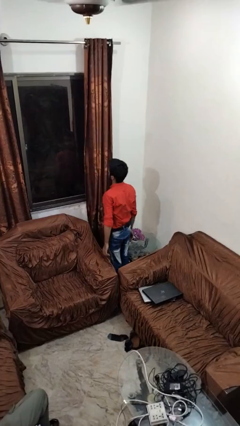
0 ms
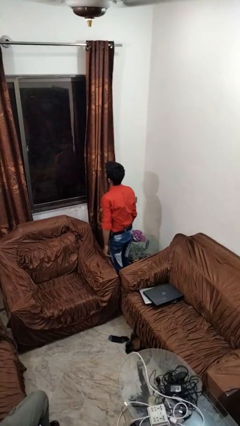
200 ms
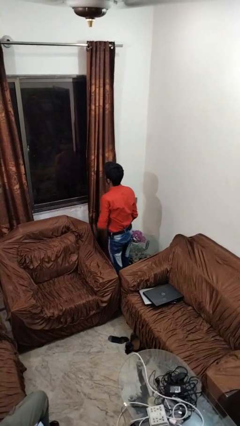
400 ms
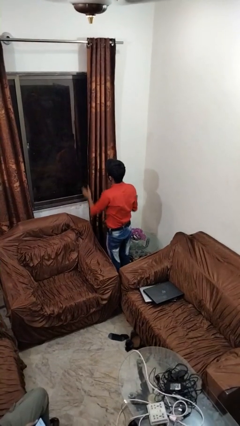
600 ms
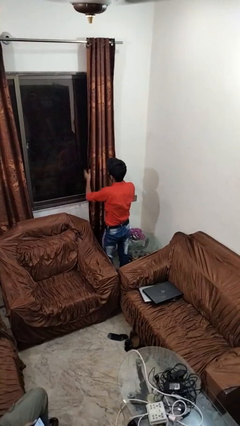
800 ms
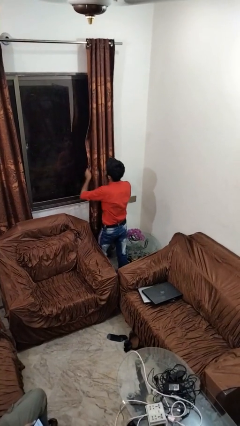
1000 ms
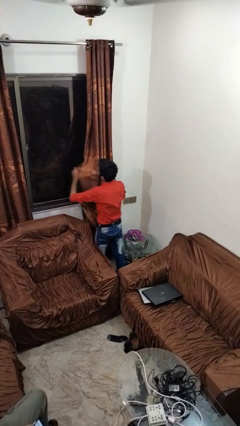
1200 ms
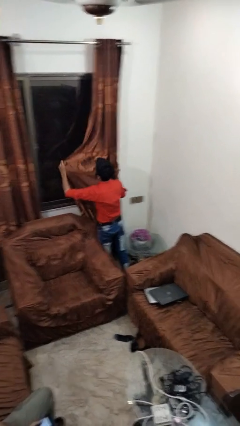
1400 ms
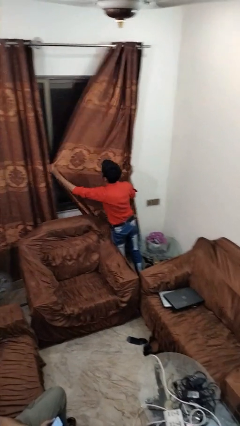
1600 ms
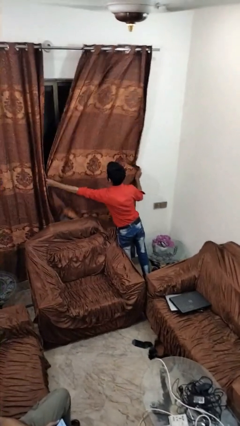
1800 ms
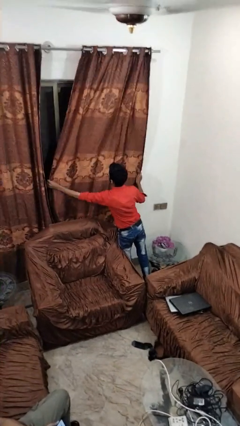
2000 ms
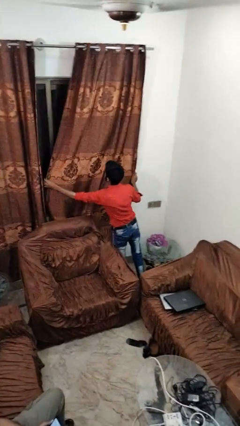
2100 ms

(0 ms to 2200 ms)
person closes curtains

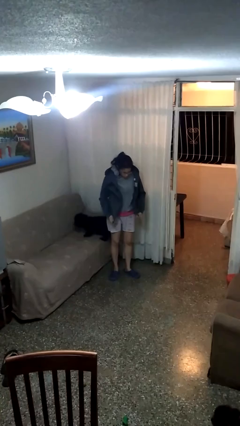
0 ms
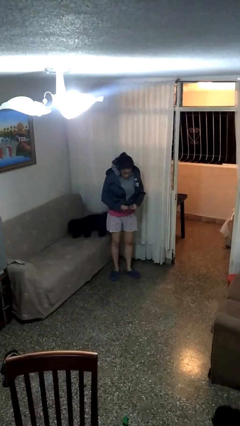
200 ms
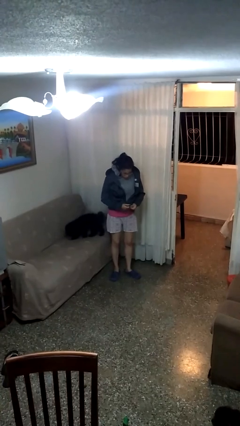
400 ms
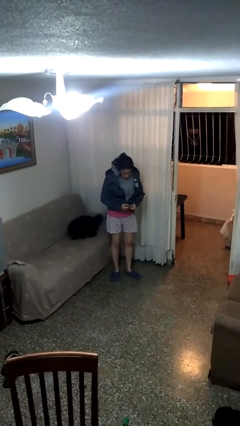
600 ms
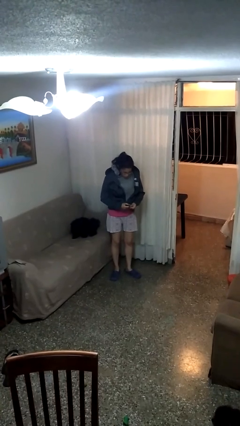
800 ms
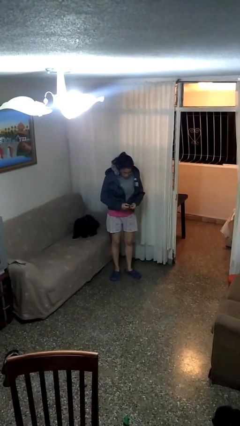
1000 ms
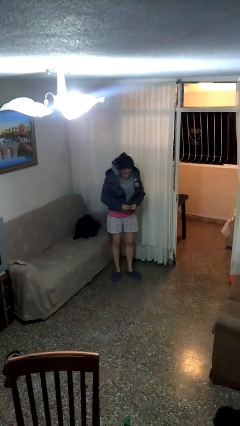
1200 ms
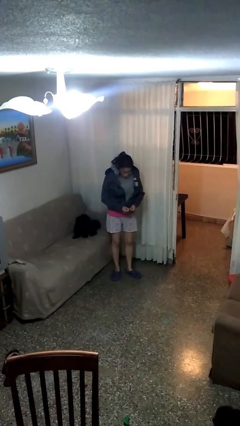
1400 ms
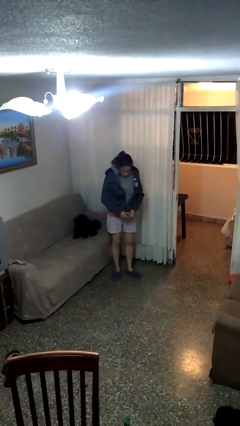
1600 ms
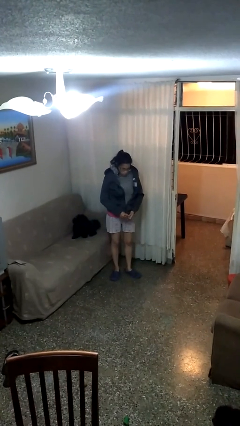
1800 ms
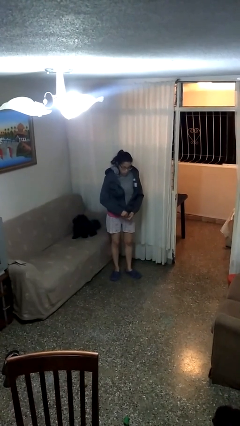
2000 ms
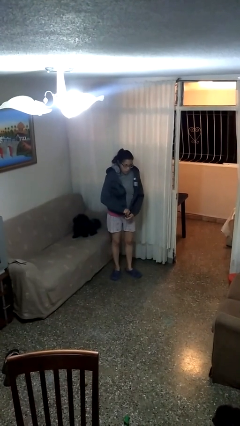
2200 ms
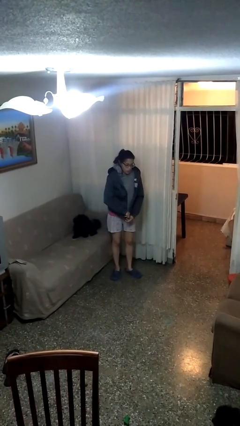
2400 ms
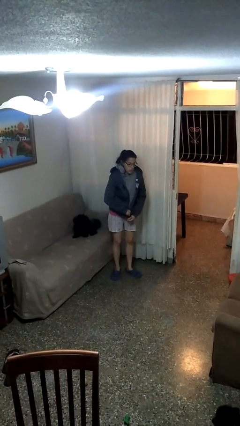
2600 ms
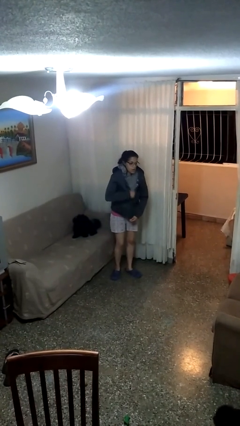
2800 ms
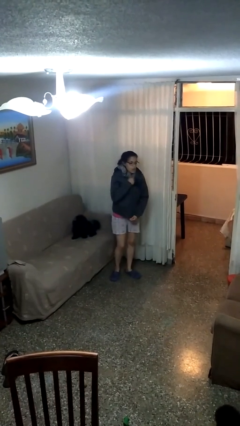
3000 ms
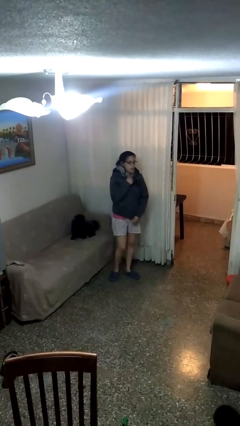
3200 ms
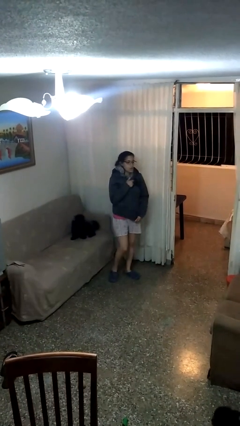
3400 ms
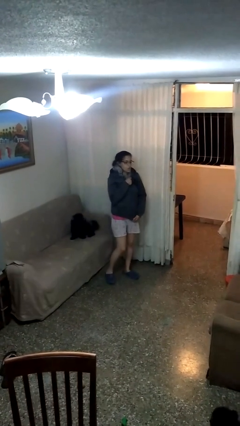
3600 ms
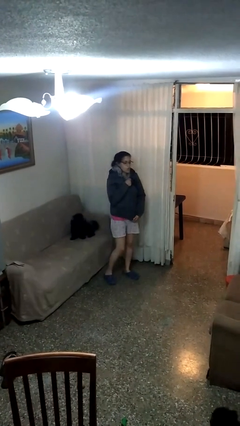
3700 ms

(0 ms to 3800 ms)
person zips up jacket

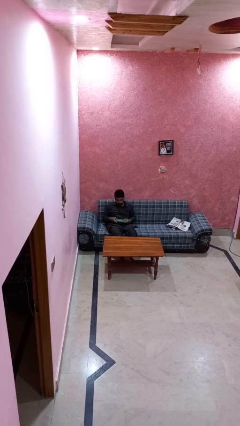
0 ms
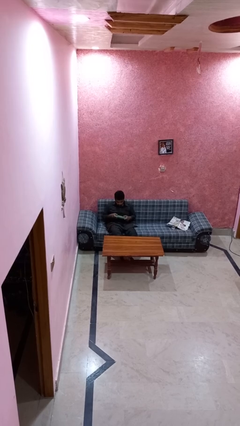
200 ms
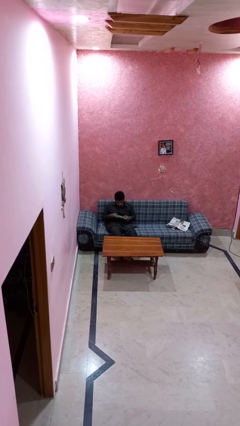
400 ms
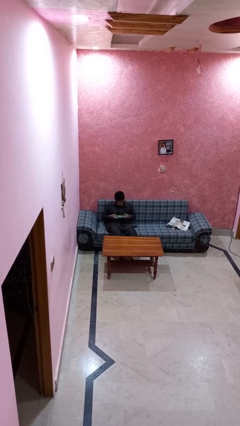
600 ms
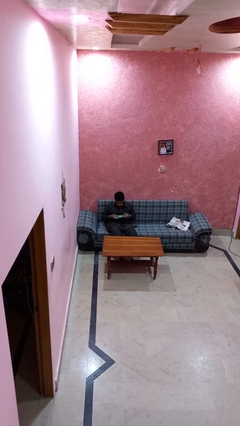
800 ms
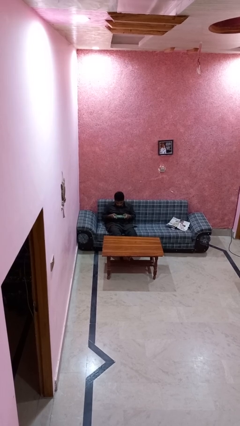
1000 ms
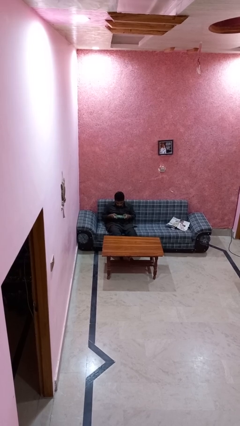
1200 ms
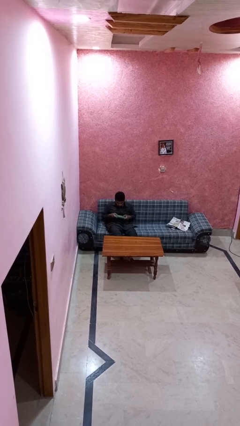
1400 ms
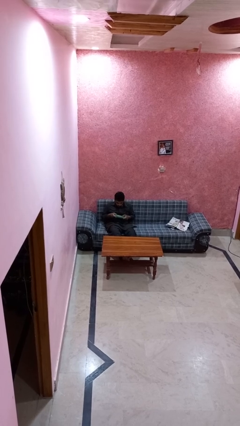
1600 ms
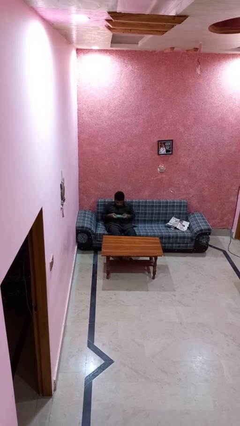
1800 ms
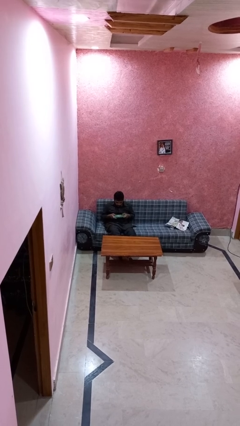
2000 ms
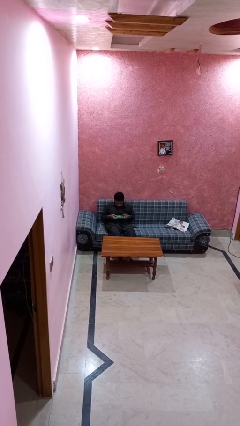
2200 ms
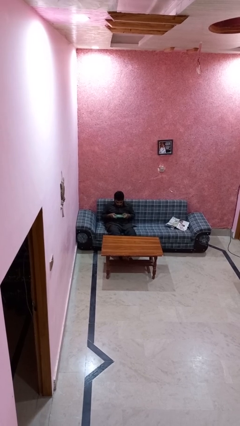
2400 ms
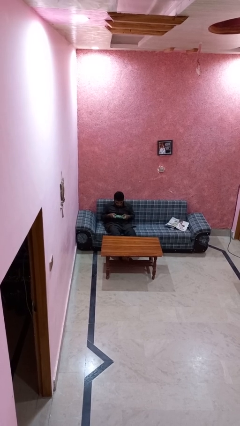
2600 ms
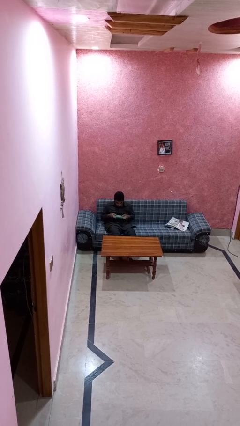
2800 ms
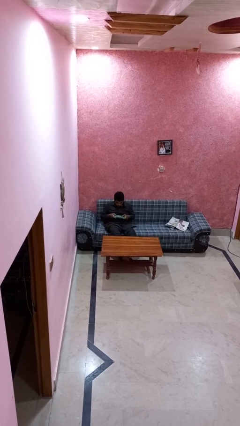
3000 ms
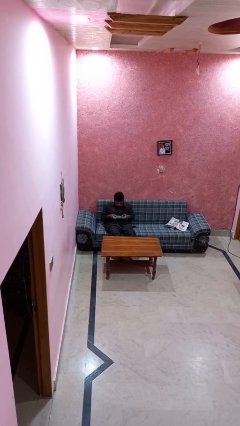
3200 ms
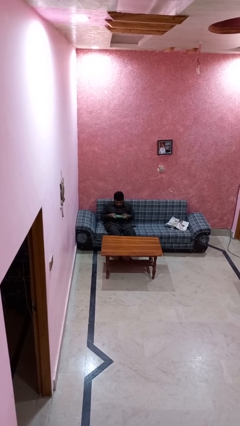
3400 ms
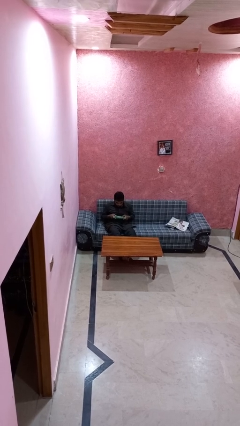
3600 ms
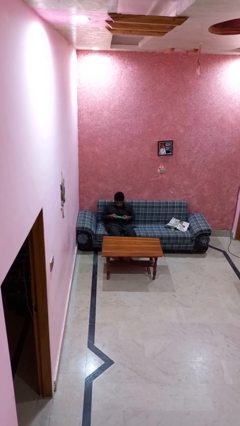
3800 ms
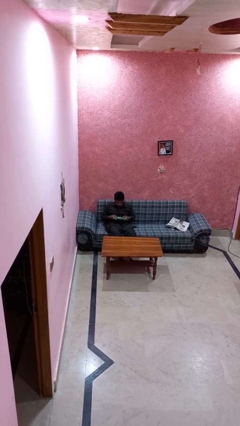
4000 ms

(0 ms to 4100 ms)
person interacts with handheld game

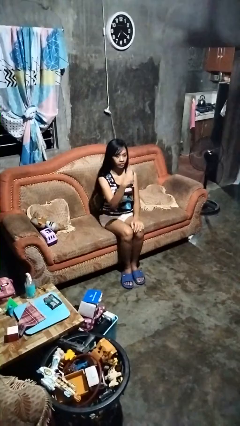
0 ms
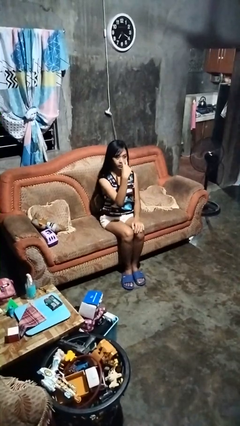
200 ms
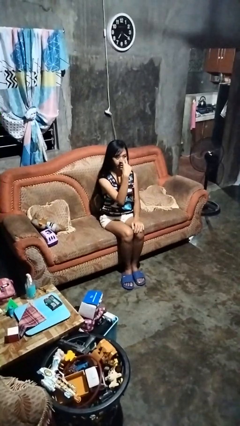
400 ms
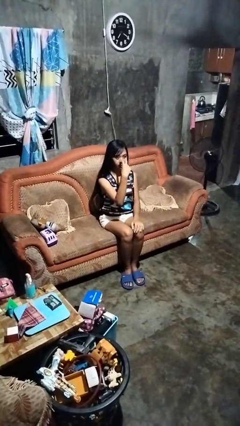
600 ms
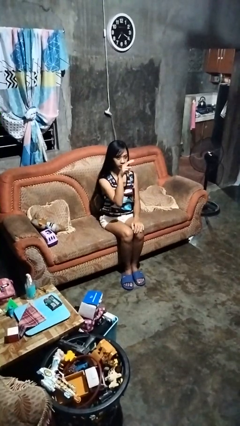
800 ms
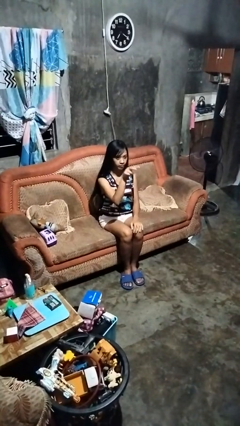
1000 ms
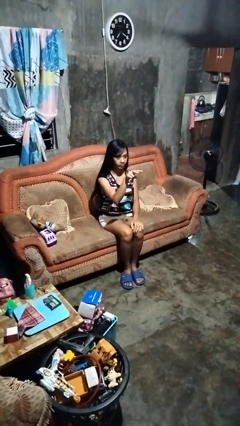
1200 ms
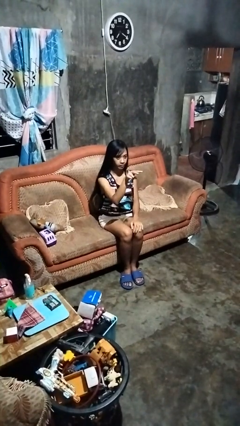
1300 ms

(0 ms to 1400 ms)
person gestures watch closely

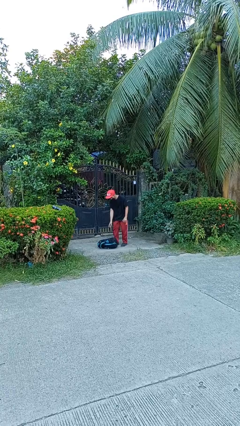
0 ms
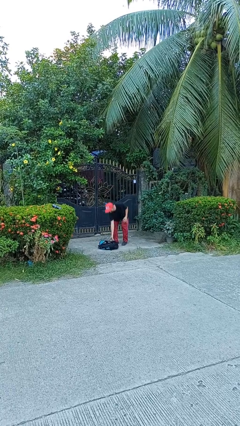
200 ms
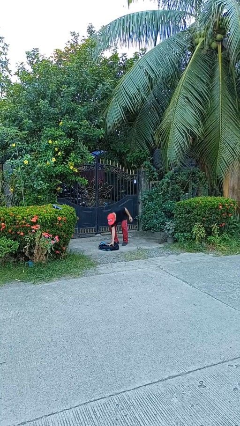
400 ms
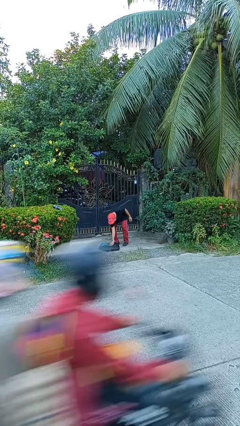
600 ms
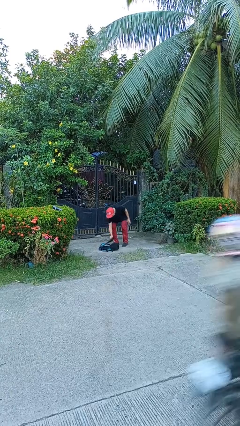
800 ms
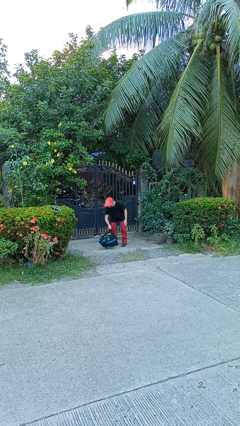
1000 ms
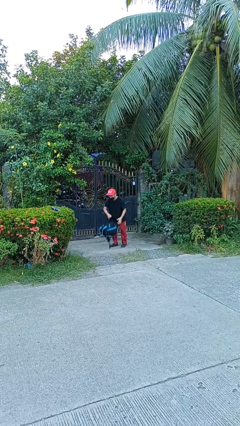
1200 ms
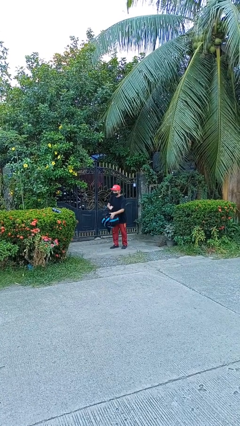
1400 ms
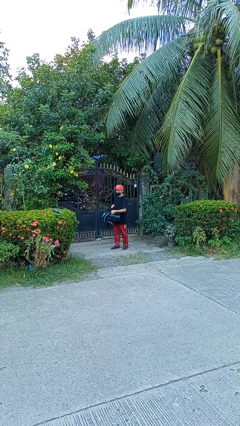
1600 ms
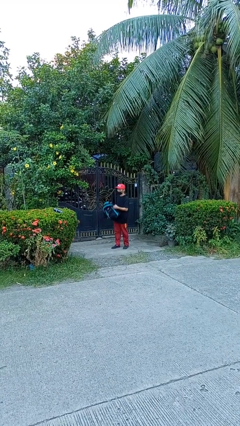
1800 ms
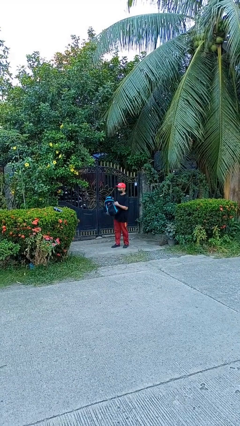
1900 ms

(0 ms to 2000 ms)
person picks up object from floor

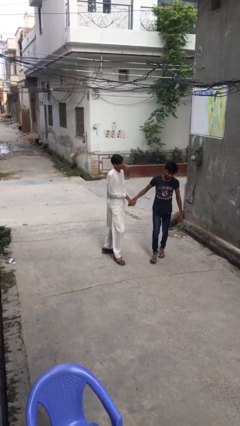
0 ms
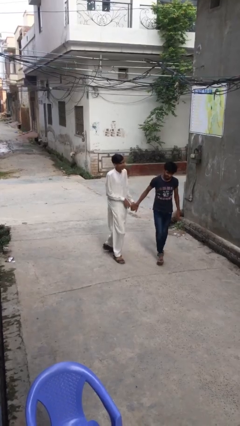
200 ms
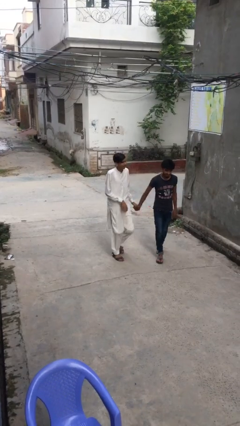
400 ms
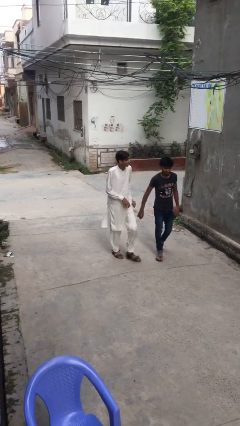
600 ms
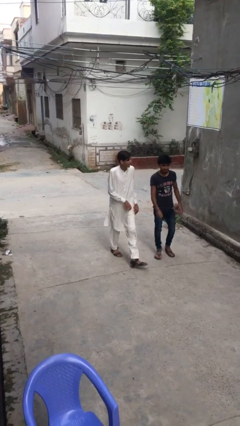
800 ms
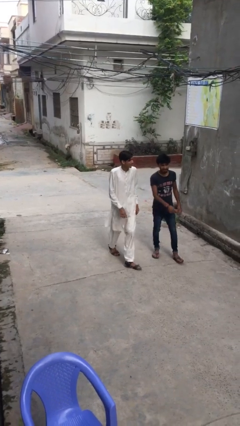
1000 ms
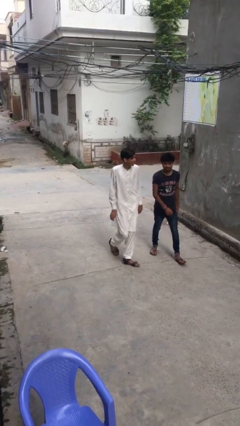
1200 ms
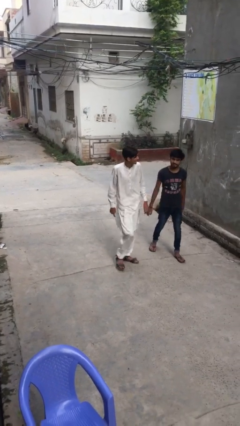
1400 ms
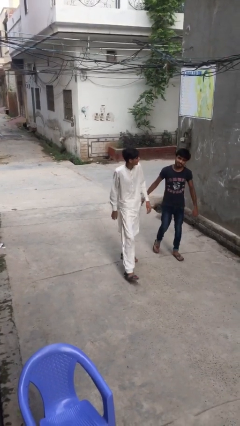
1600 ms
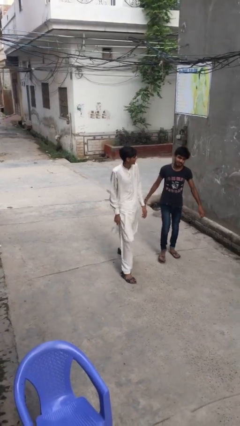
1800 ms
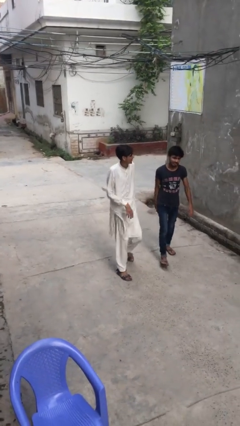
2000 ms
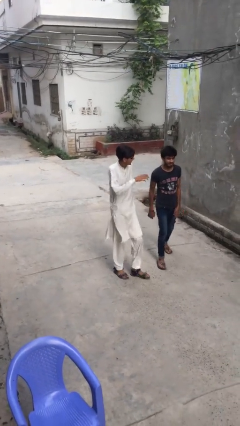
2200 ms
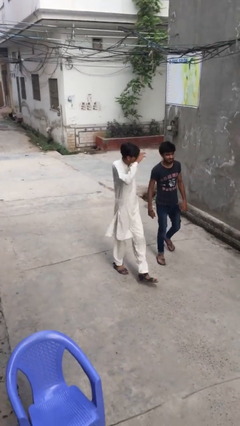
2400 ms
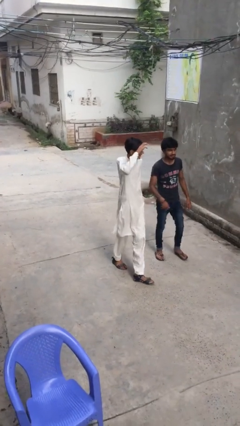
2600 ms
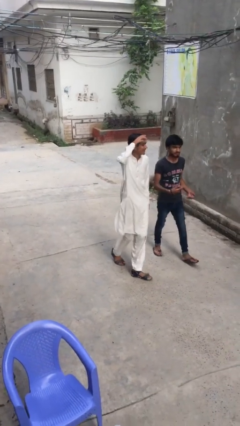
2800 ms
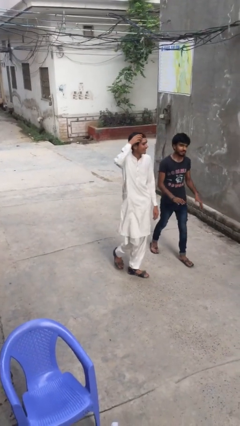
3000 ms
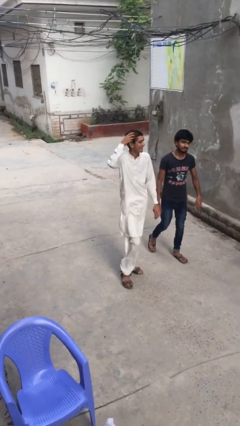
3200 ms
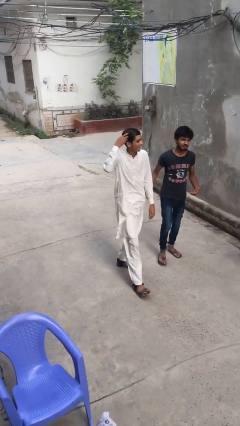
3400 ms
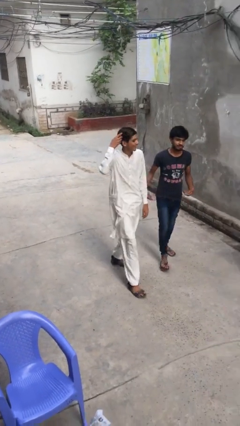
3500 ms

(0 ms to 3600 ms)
person talks to person
